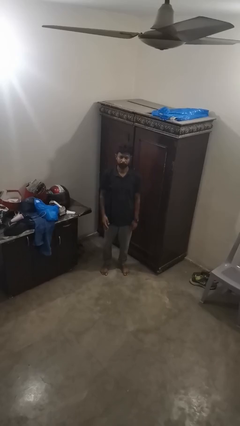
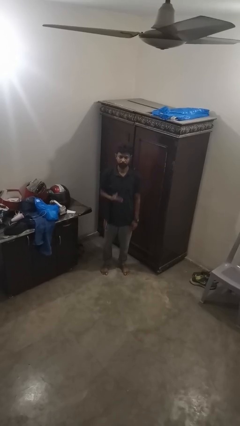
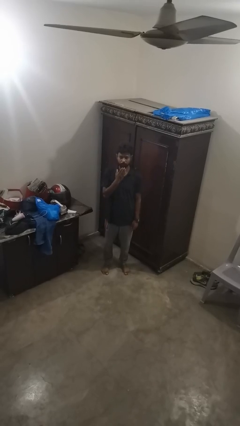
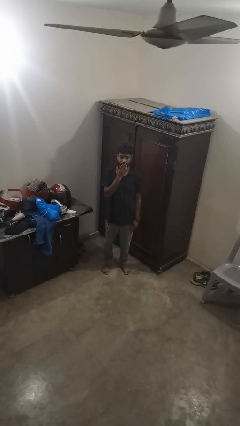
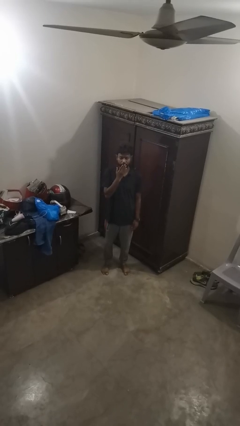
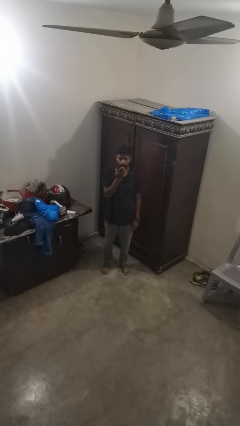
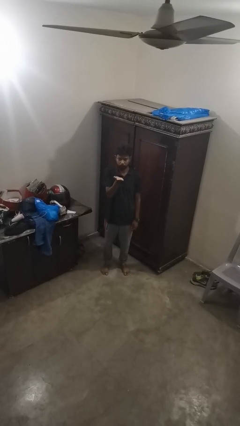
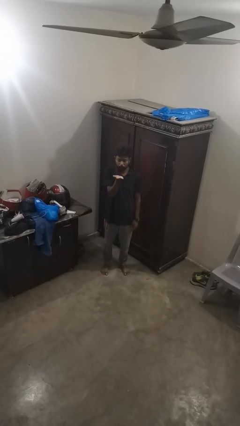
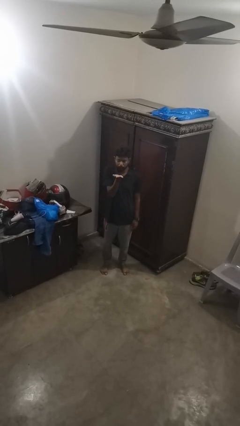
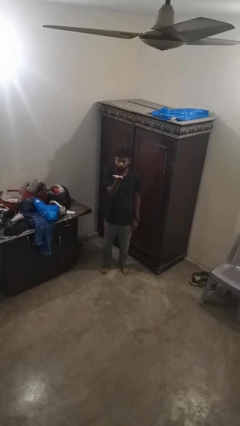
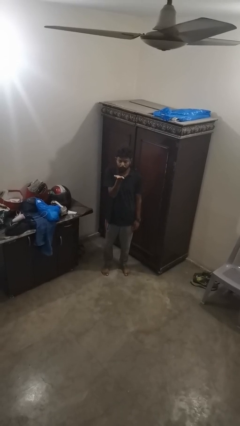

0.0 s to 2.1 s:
person gestures blow kiss

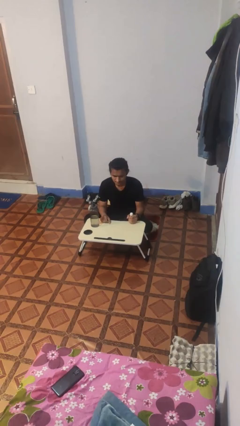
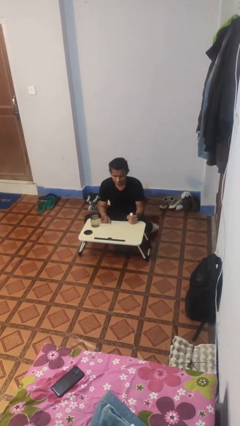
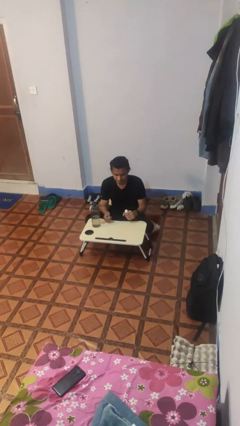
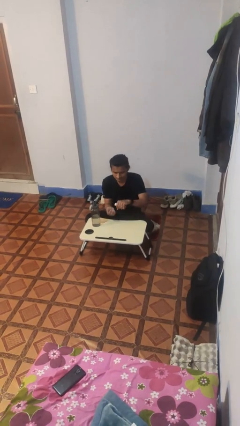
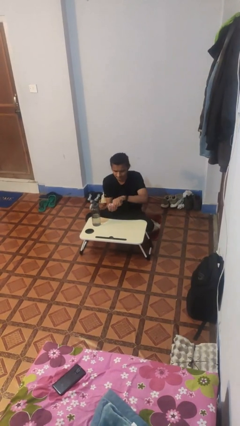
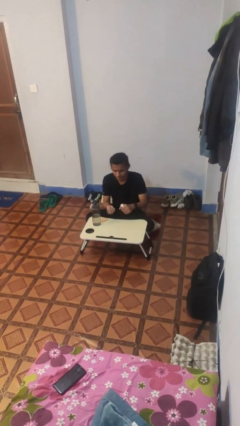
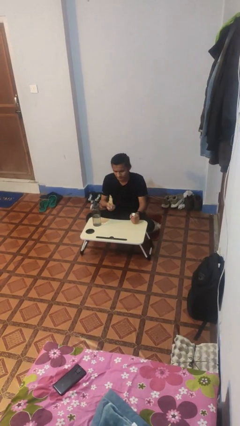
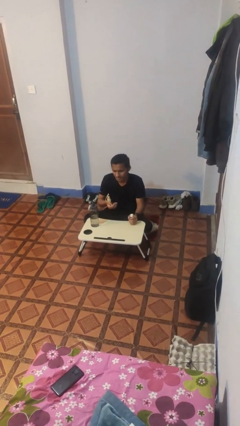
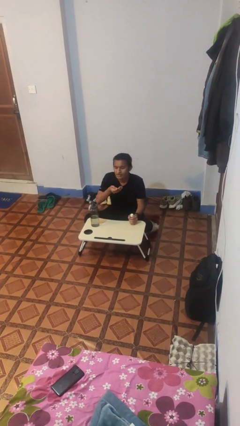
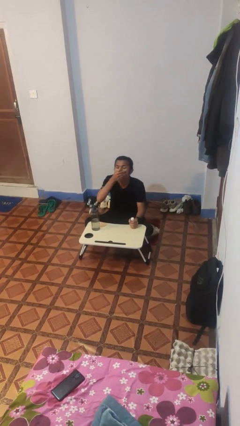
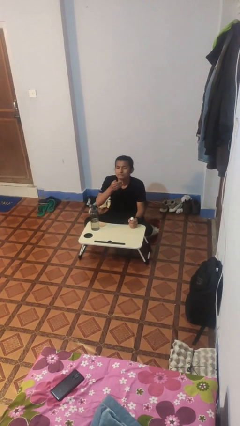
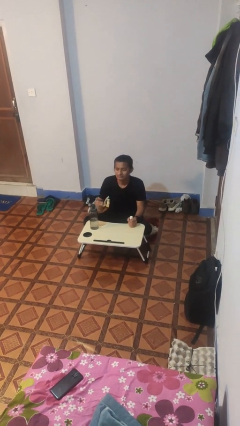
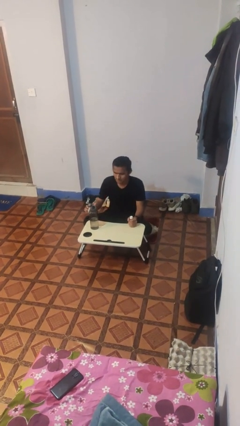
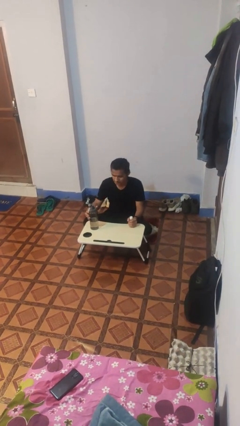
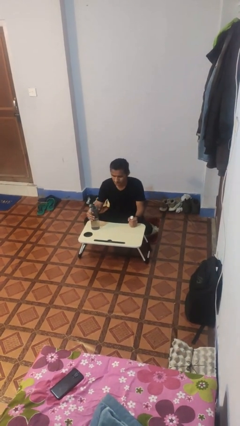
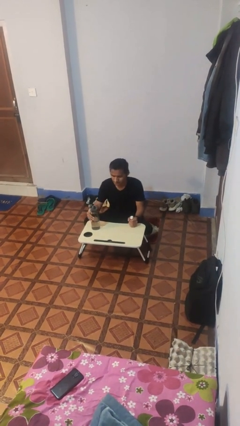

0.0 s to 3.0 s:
person takes medicine pills

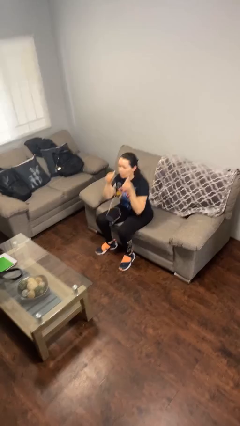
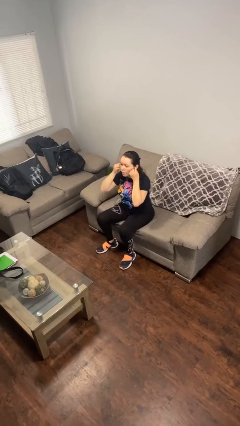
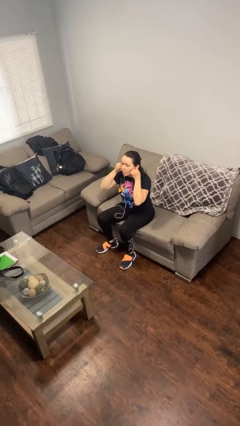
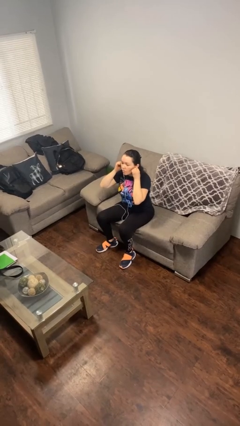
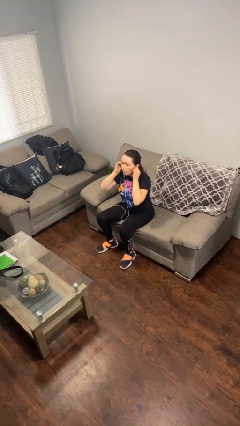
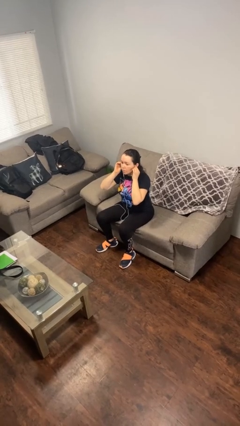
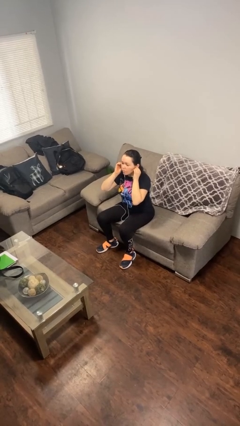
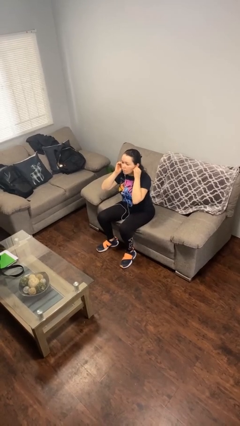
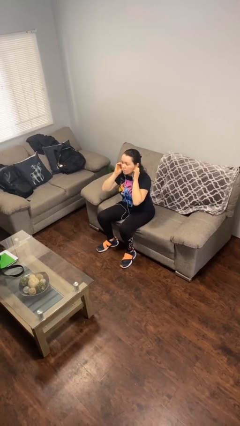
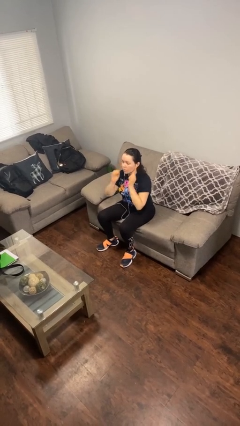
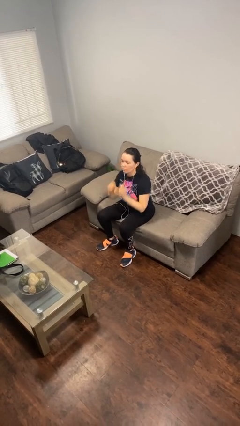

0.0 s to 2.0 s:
person puts on headphones

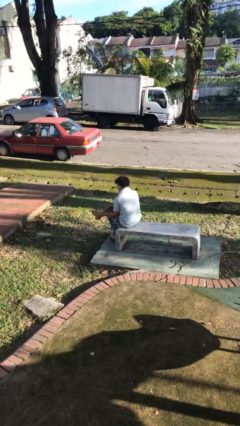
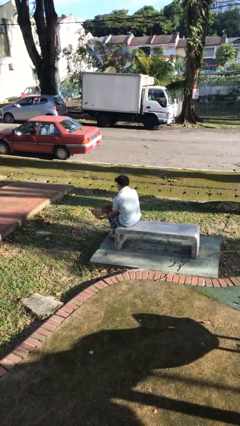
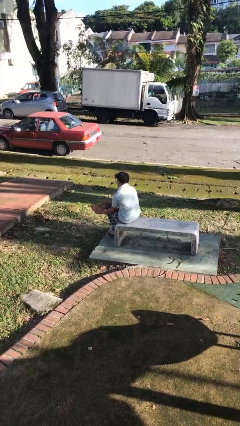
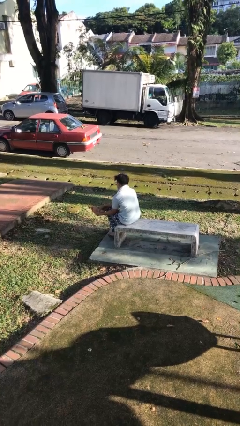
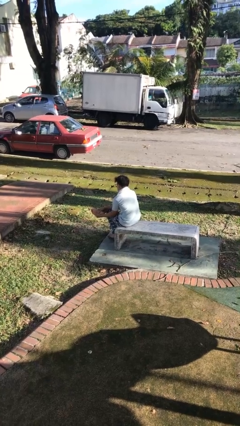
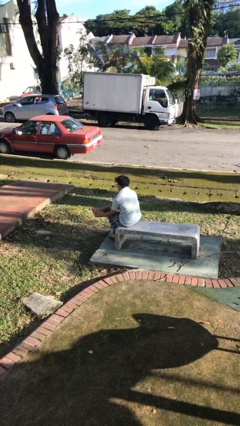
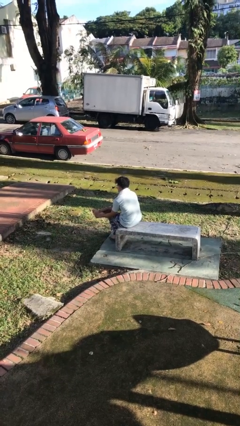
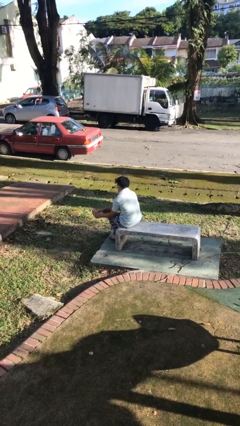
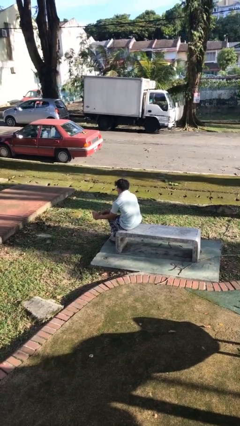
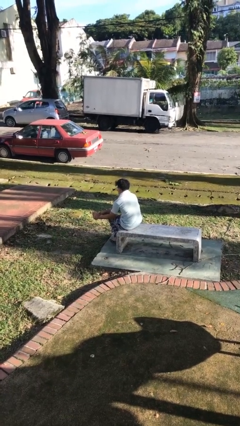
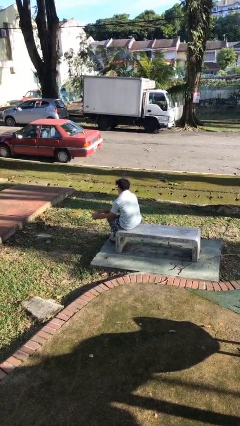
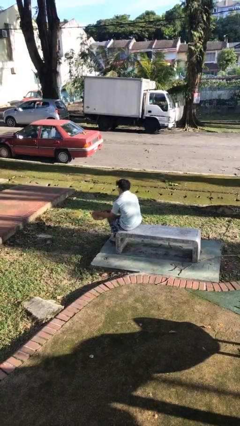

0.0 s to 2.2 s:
person rubs foot

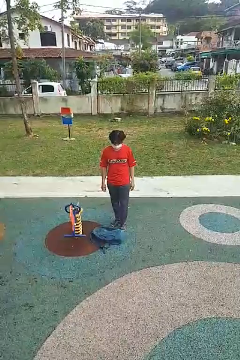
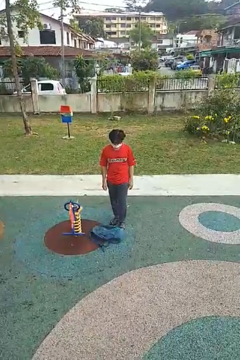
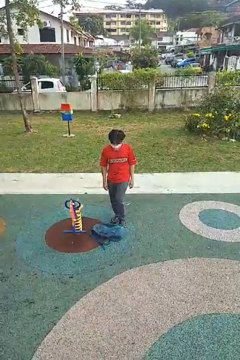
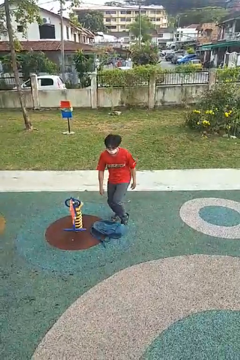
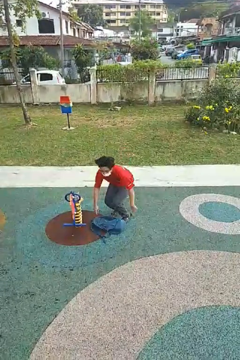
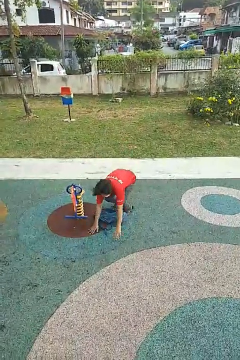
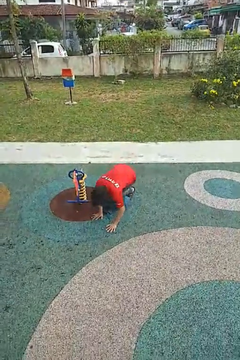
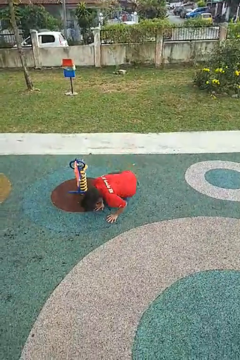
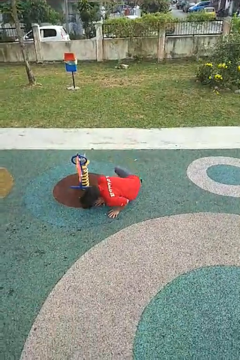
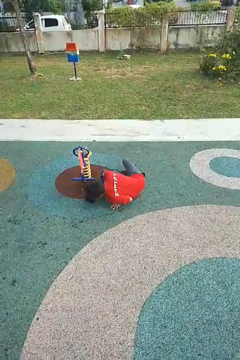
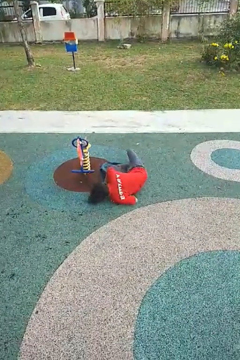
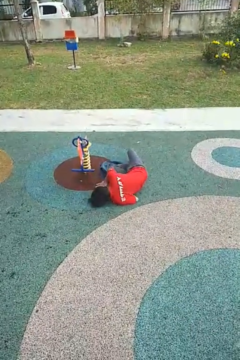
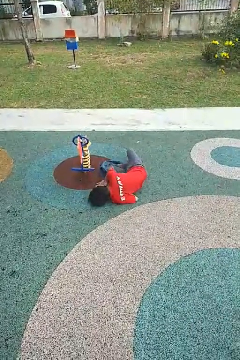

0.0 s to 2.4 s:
person trips on object on floor

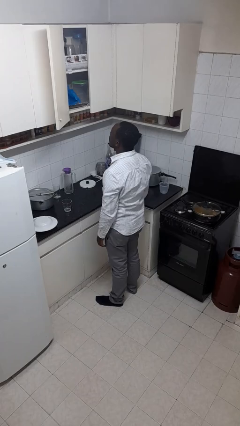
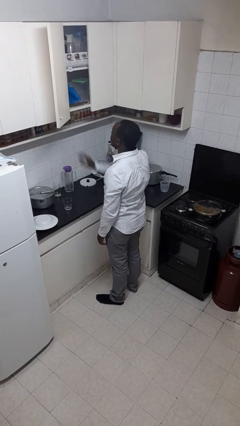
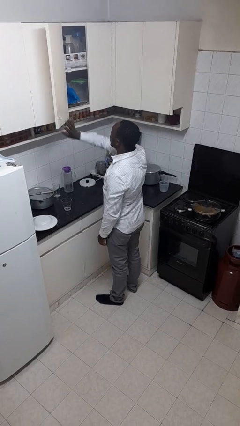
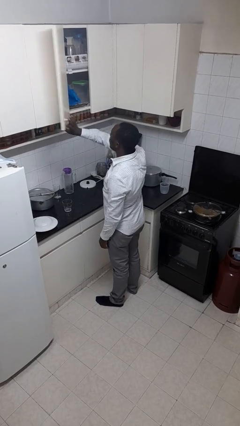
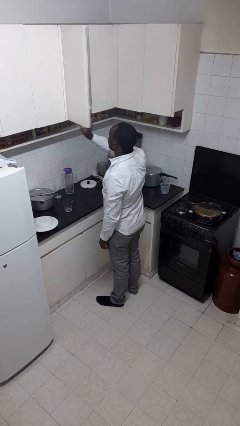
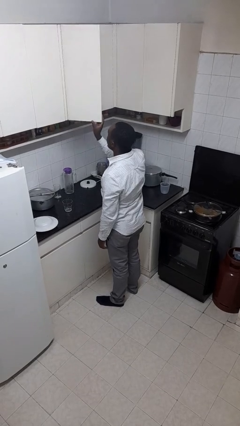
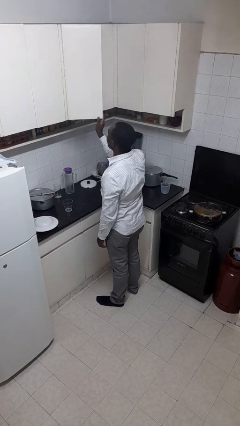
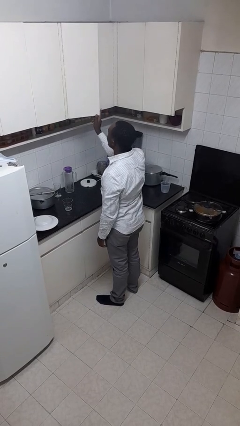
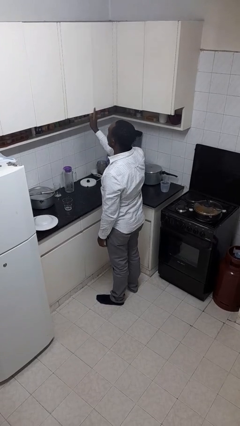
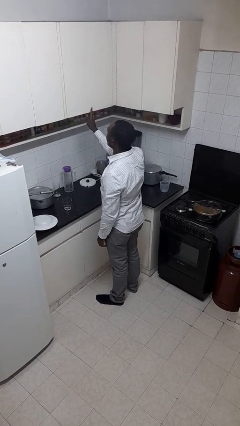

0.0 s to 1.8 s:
person closes cabinet

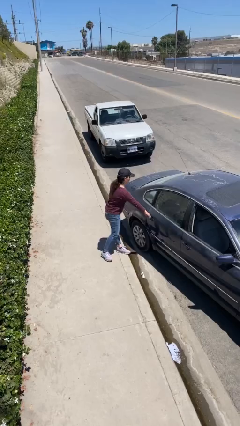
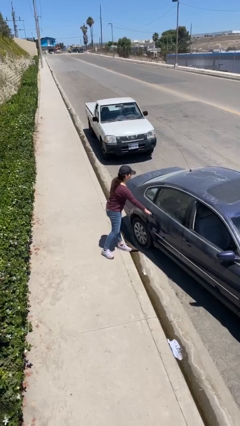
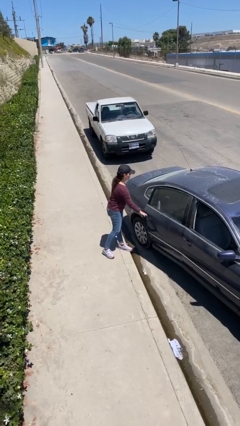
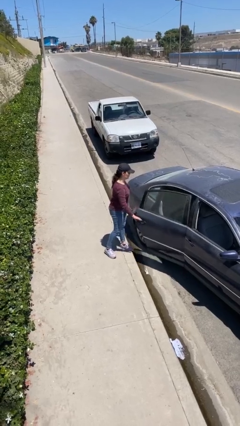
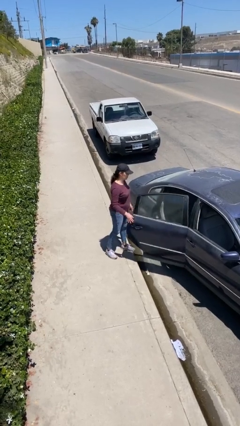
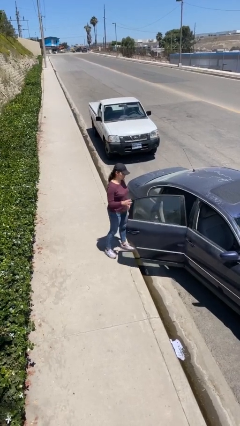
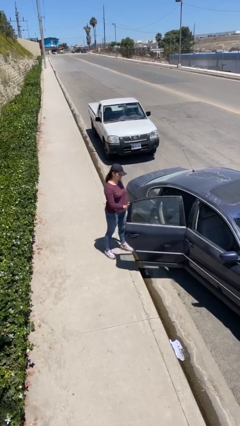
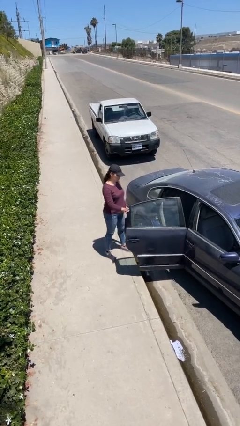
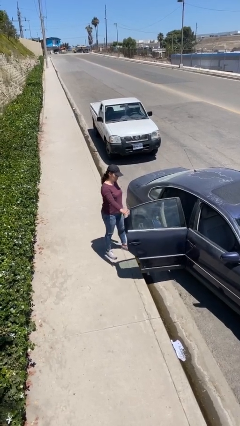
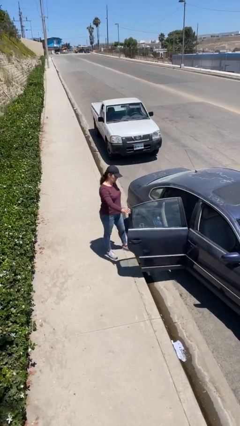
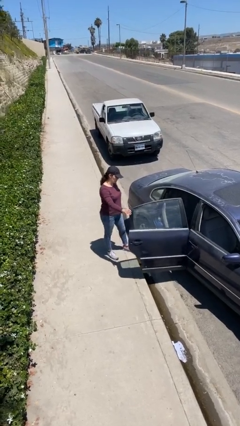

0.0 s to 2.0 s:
person opens car door

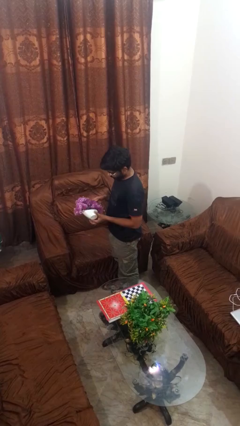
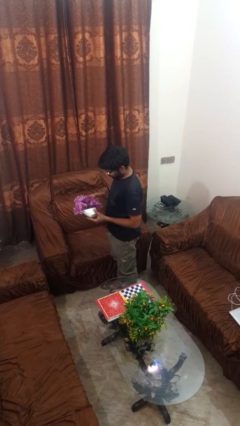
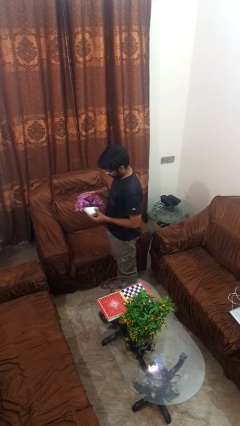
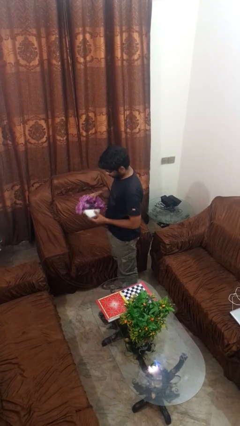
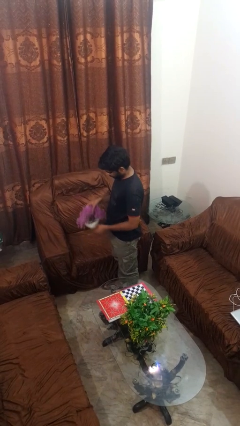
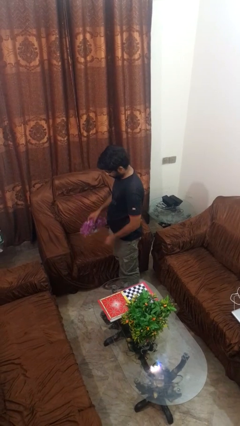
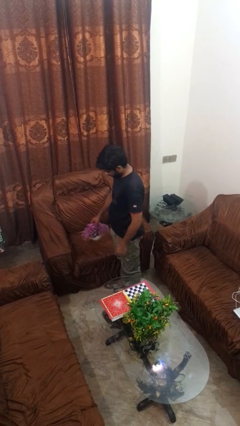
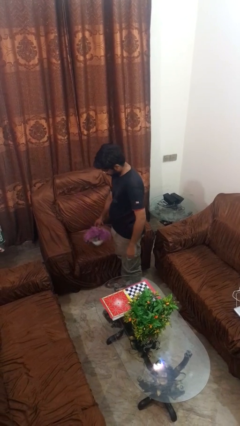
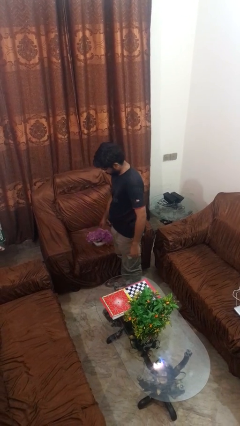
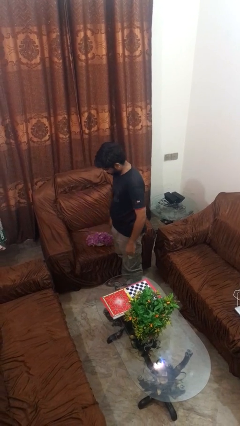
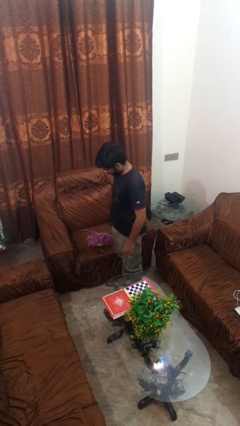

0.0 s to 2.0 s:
person puts down object on couch
